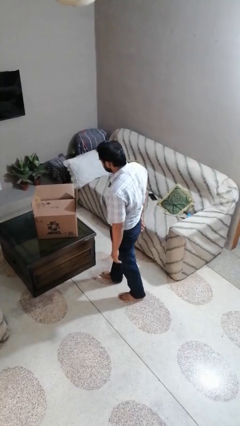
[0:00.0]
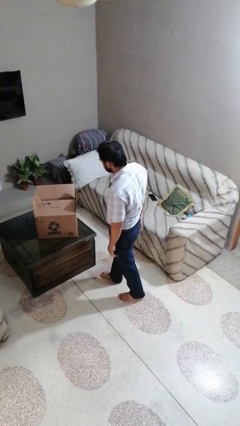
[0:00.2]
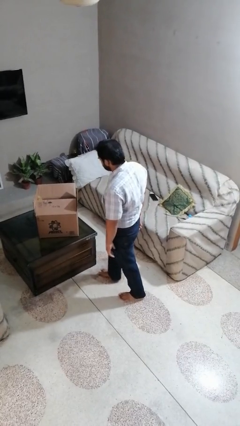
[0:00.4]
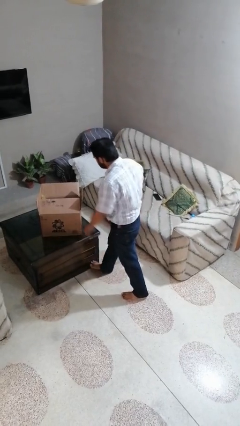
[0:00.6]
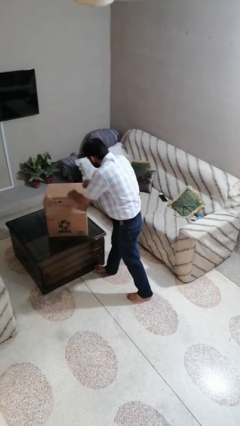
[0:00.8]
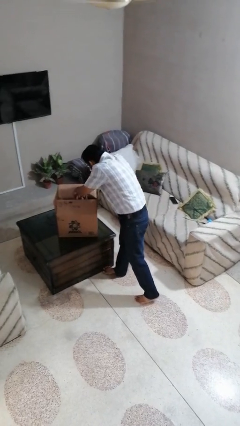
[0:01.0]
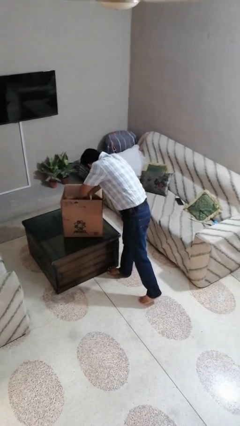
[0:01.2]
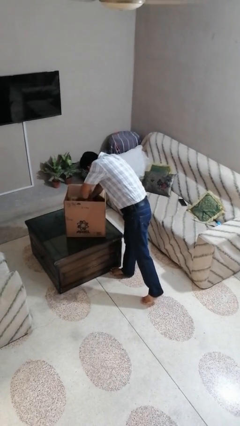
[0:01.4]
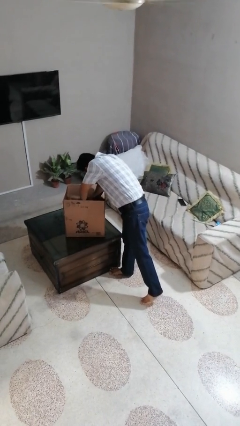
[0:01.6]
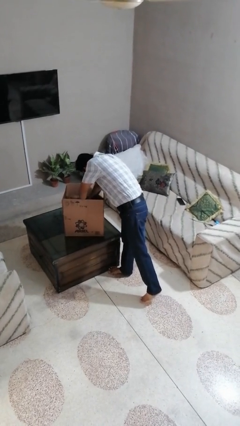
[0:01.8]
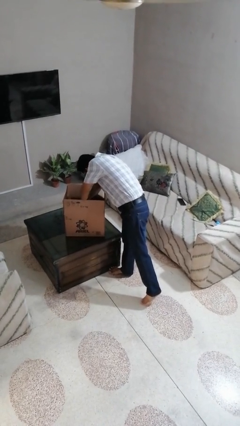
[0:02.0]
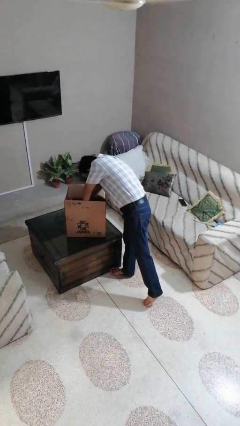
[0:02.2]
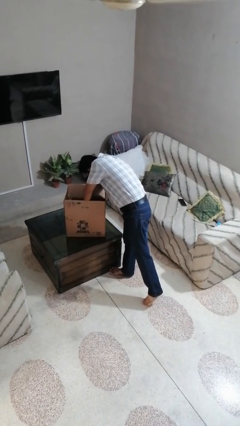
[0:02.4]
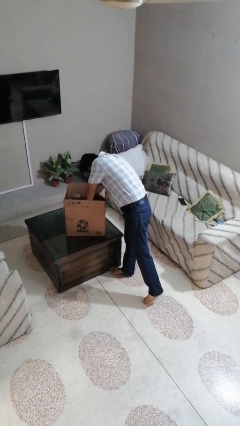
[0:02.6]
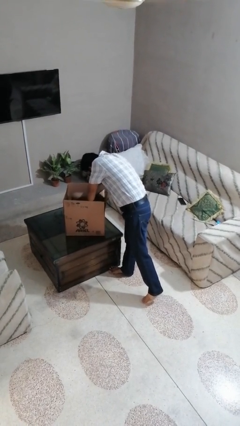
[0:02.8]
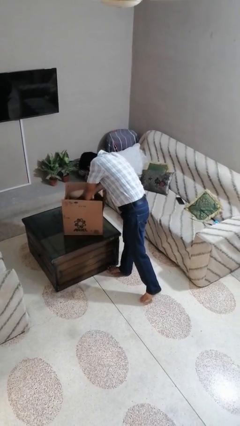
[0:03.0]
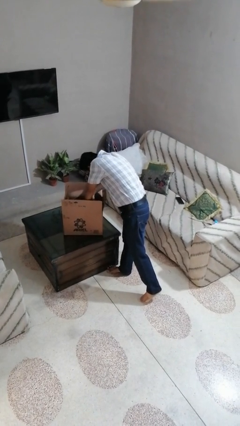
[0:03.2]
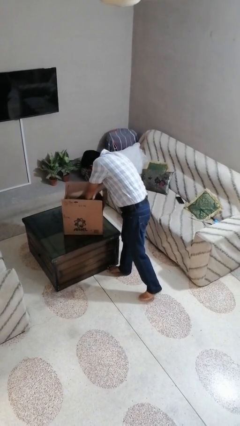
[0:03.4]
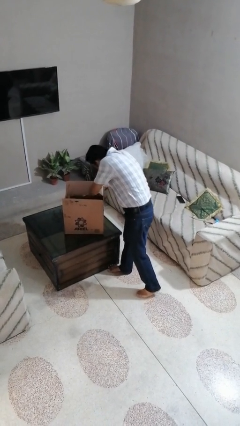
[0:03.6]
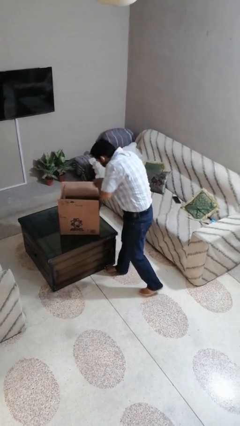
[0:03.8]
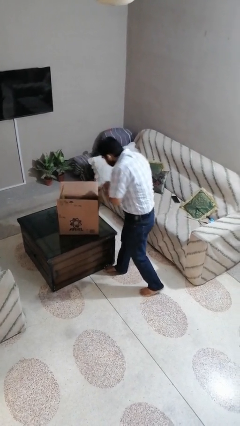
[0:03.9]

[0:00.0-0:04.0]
person searches in box

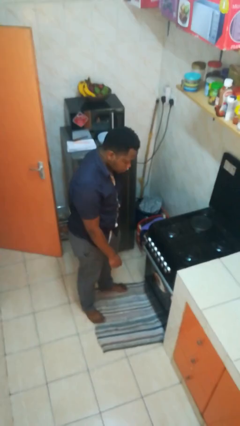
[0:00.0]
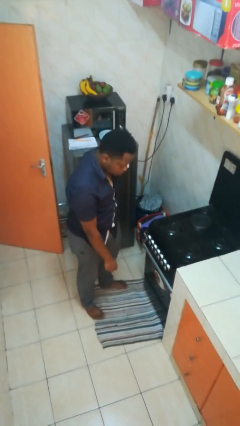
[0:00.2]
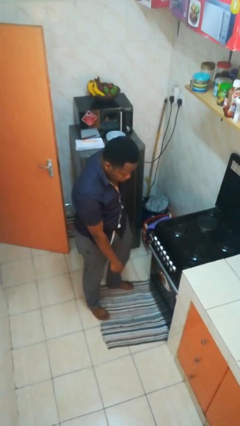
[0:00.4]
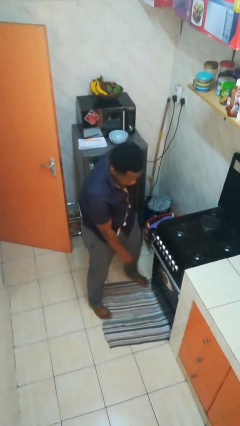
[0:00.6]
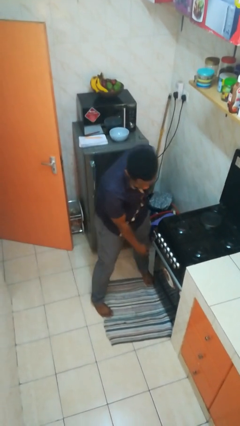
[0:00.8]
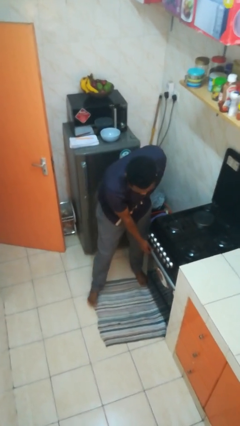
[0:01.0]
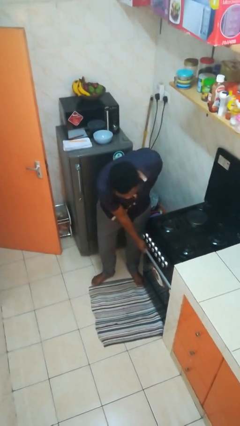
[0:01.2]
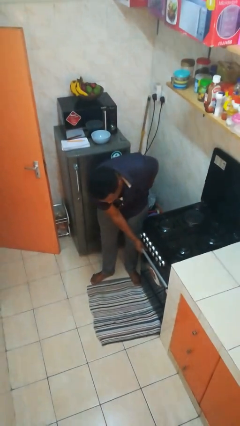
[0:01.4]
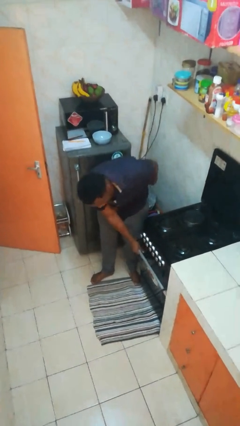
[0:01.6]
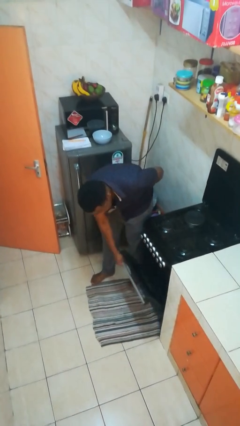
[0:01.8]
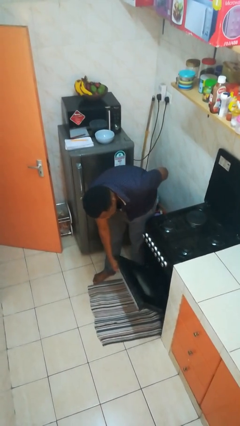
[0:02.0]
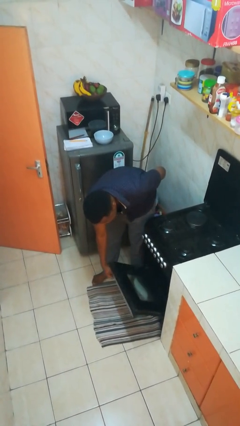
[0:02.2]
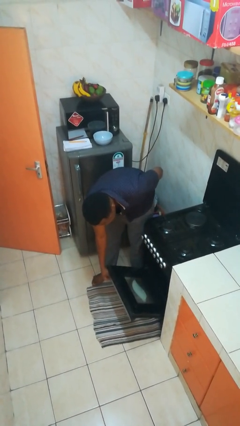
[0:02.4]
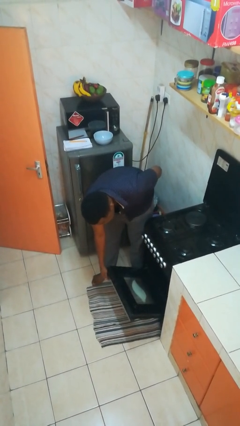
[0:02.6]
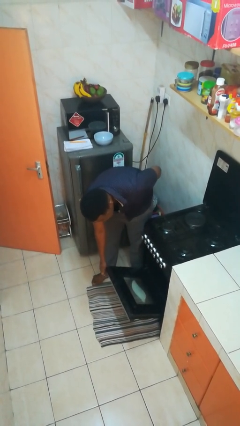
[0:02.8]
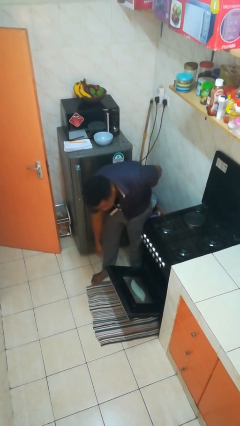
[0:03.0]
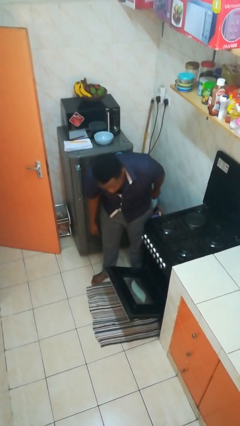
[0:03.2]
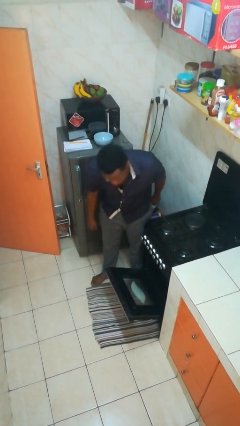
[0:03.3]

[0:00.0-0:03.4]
person opens oven door

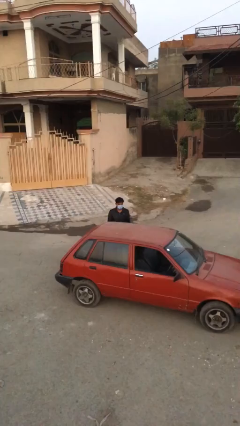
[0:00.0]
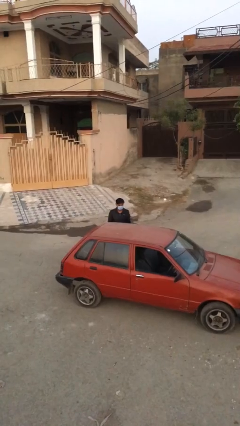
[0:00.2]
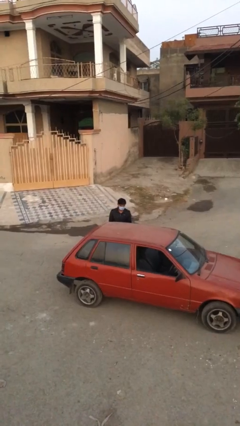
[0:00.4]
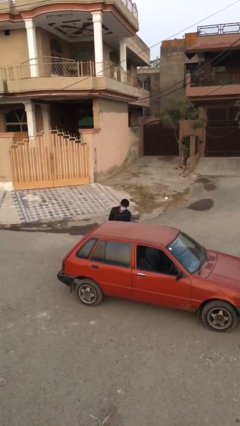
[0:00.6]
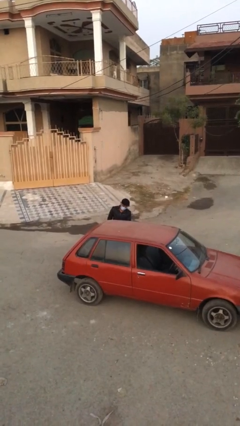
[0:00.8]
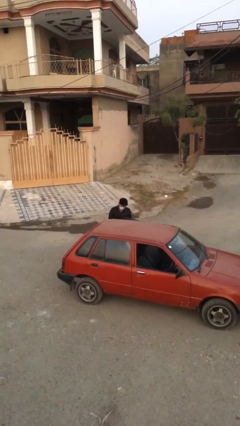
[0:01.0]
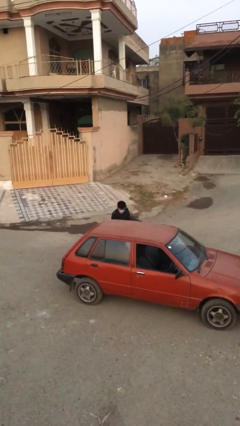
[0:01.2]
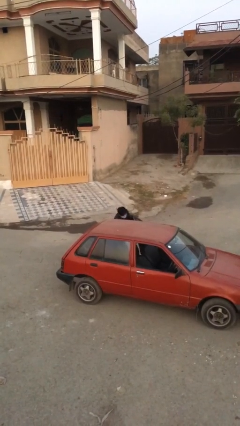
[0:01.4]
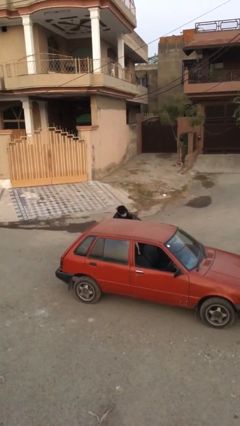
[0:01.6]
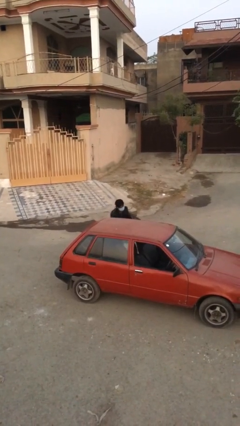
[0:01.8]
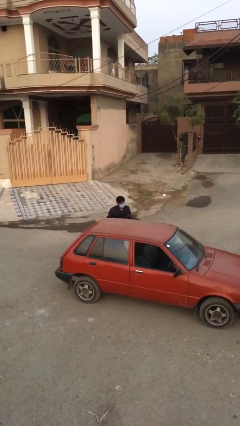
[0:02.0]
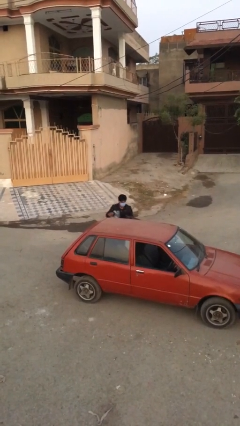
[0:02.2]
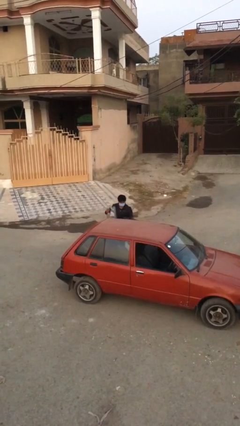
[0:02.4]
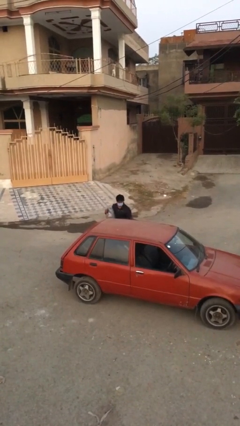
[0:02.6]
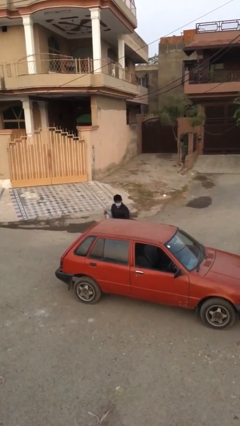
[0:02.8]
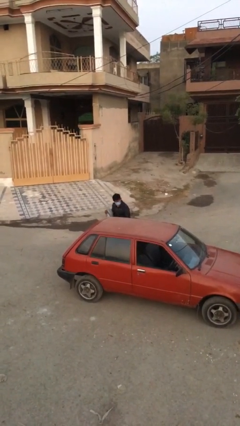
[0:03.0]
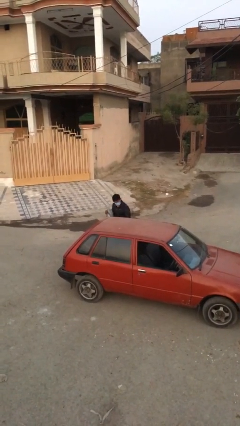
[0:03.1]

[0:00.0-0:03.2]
person unloads car

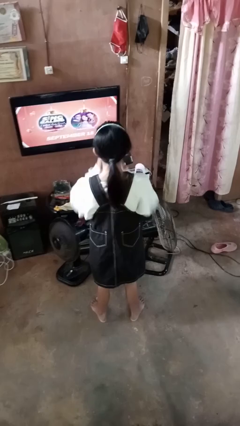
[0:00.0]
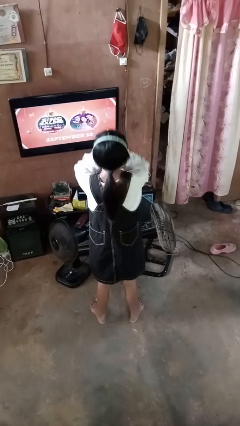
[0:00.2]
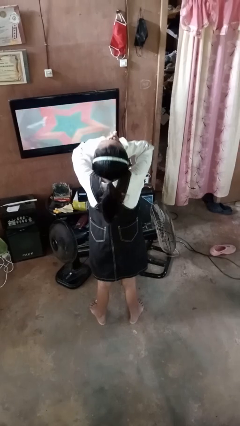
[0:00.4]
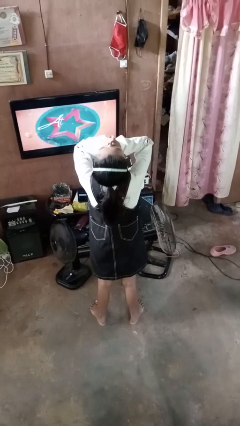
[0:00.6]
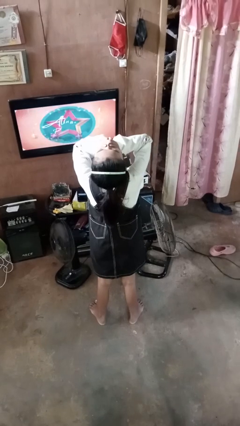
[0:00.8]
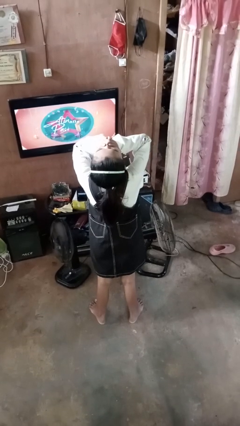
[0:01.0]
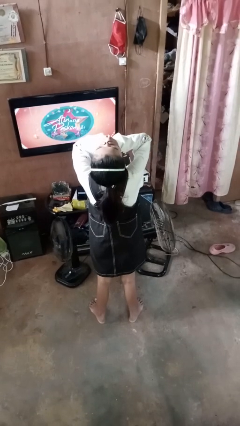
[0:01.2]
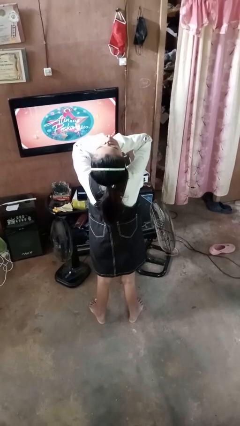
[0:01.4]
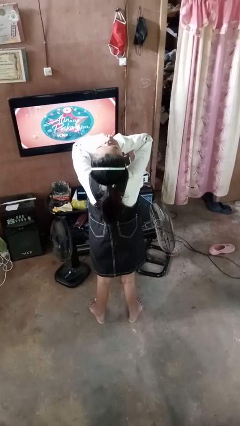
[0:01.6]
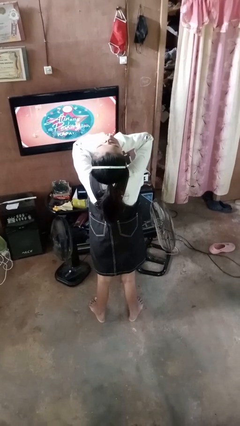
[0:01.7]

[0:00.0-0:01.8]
person yawns

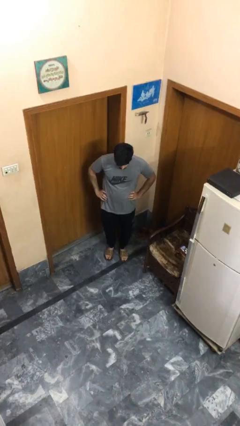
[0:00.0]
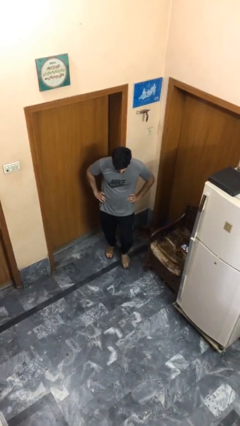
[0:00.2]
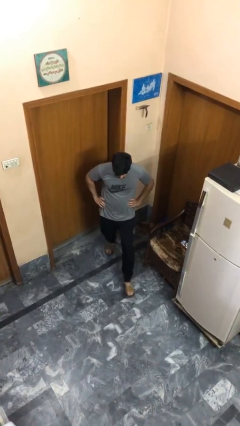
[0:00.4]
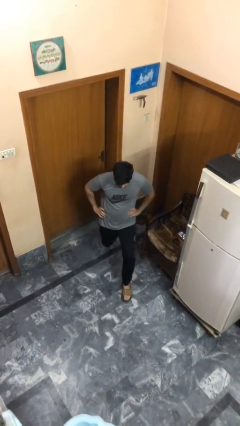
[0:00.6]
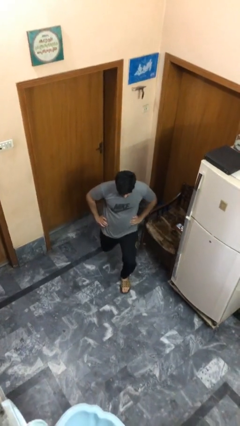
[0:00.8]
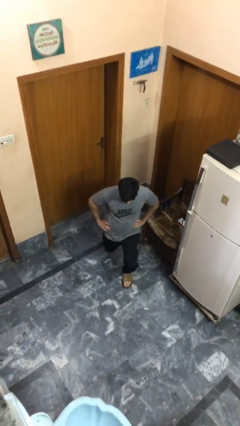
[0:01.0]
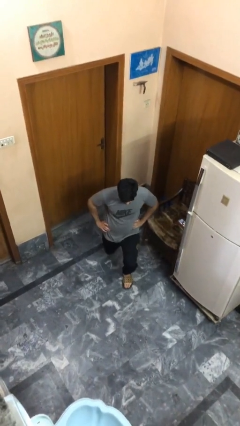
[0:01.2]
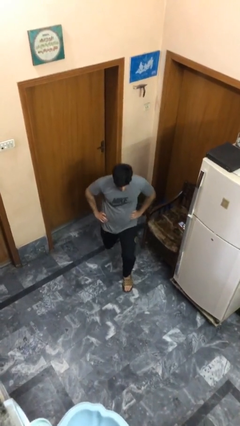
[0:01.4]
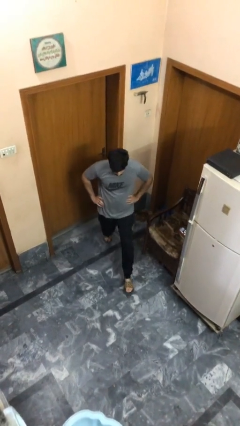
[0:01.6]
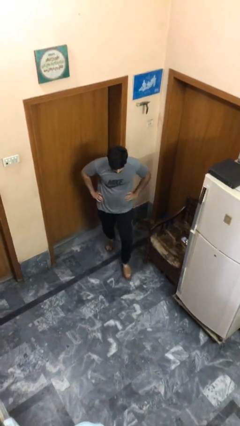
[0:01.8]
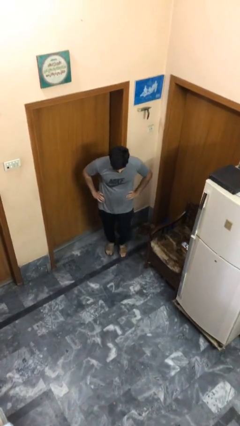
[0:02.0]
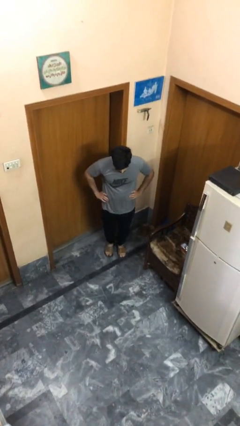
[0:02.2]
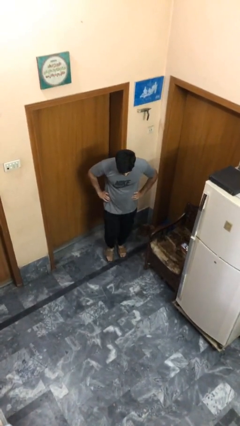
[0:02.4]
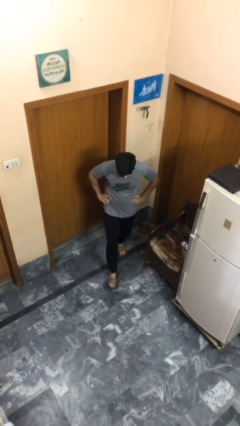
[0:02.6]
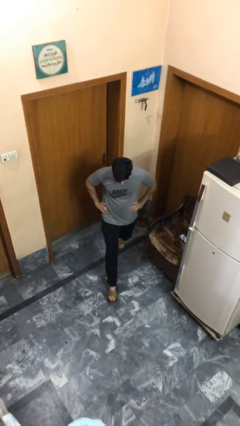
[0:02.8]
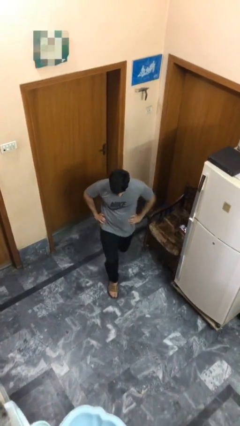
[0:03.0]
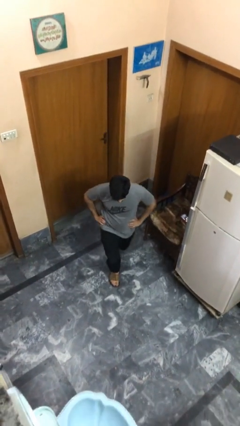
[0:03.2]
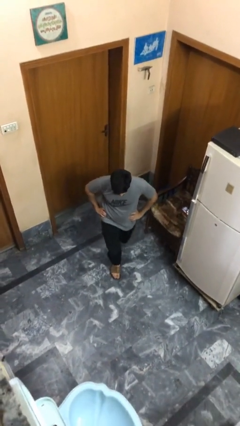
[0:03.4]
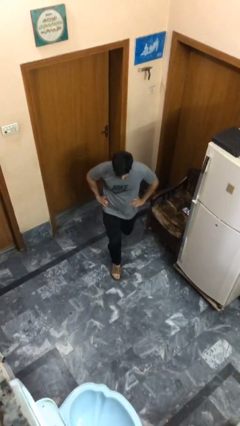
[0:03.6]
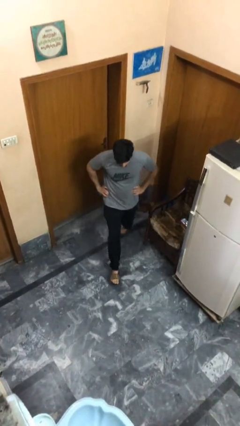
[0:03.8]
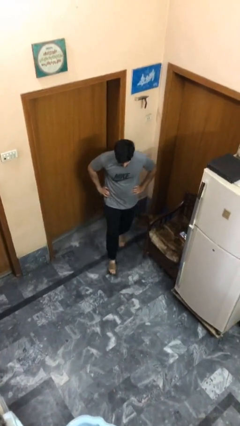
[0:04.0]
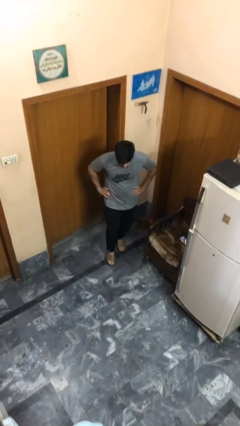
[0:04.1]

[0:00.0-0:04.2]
person exercises with lunges

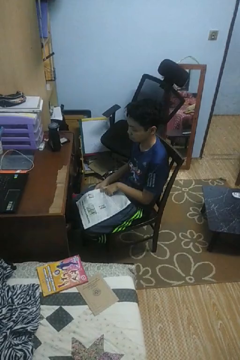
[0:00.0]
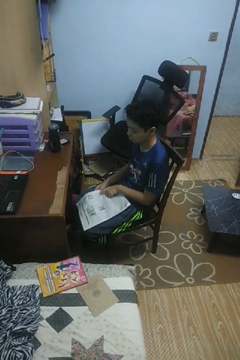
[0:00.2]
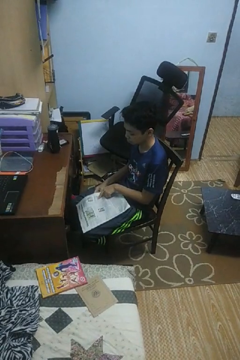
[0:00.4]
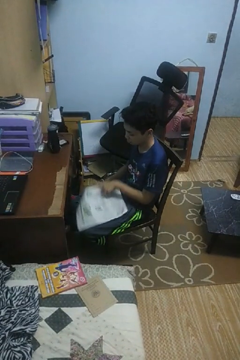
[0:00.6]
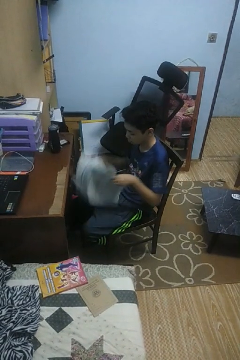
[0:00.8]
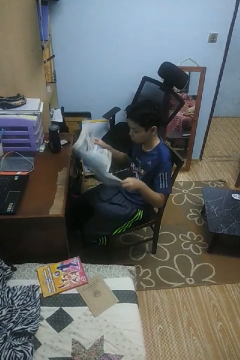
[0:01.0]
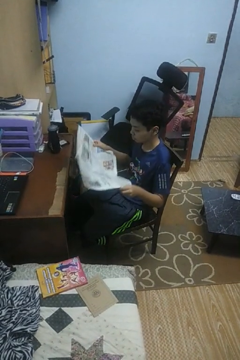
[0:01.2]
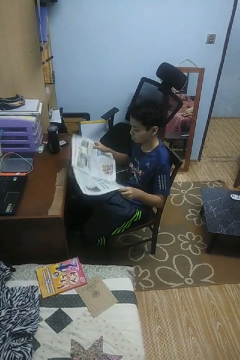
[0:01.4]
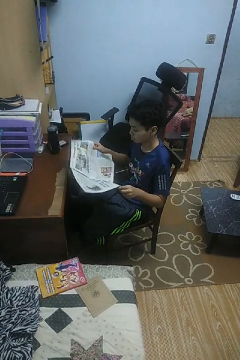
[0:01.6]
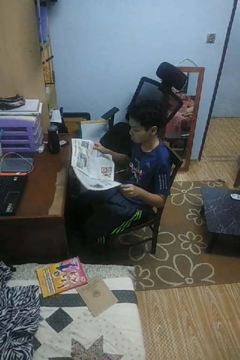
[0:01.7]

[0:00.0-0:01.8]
person reads newspaper
